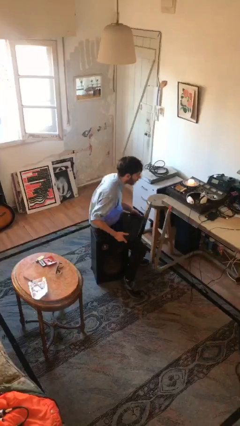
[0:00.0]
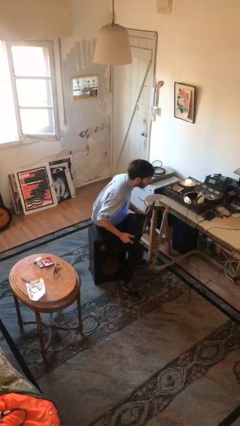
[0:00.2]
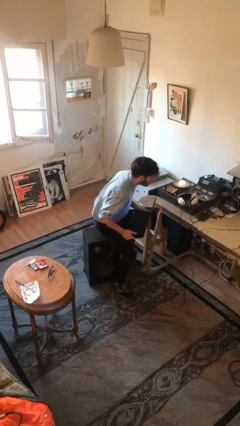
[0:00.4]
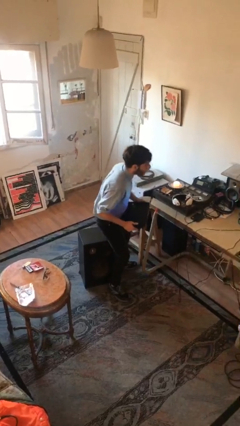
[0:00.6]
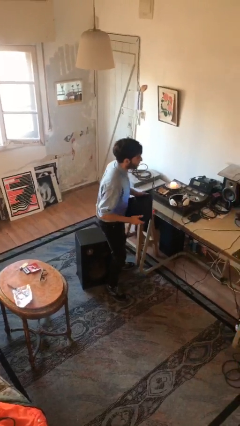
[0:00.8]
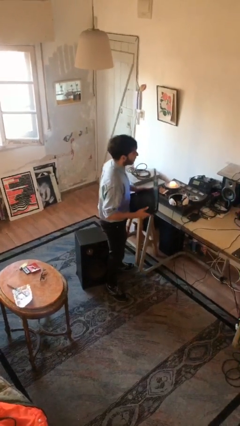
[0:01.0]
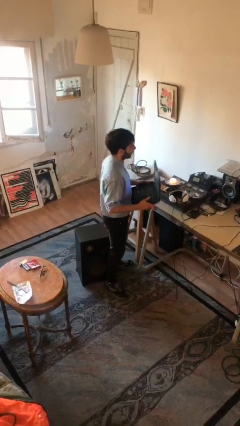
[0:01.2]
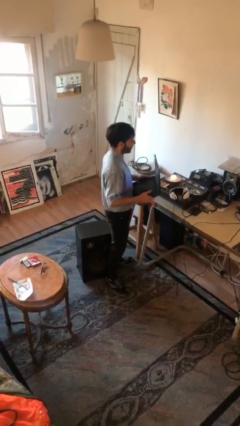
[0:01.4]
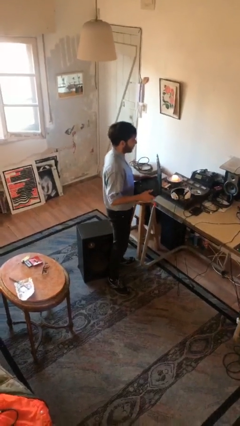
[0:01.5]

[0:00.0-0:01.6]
person stands up

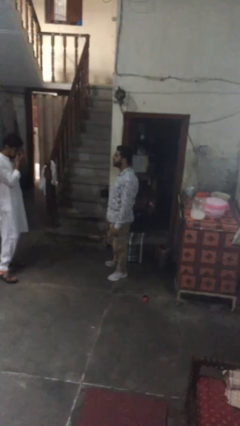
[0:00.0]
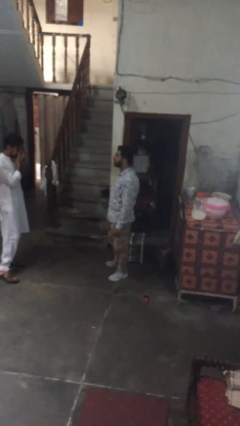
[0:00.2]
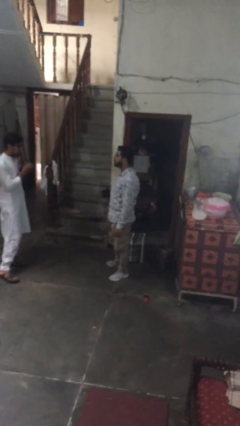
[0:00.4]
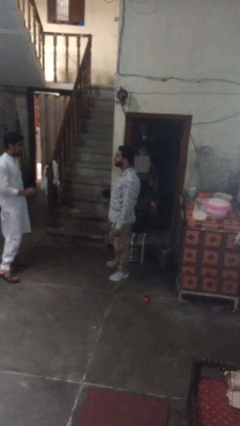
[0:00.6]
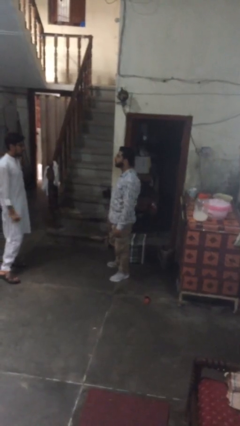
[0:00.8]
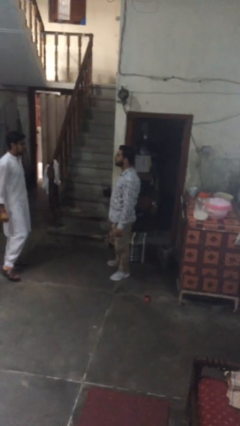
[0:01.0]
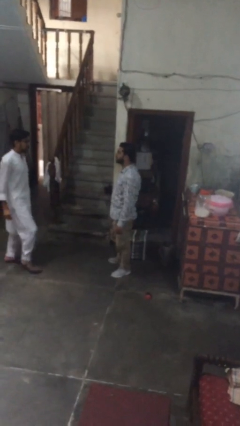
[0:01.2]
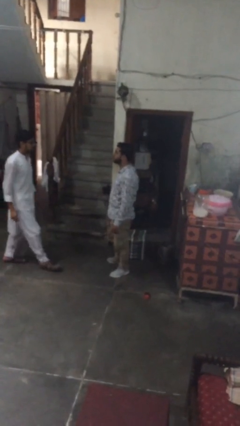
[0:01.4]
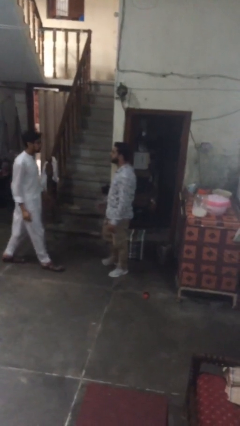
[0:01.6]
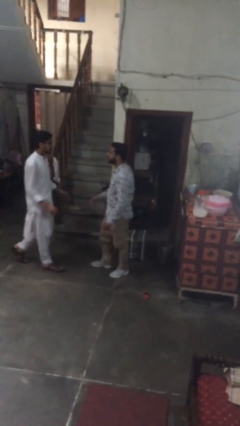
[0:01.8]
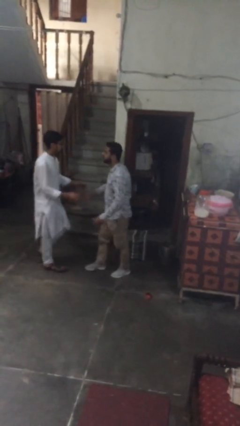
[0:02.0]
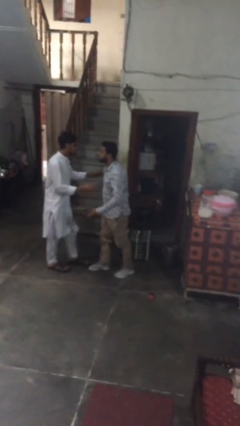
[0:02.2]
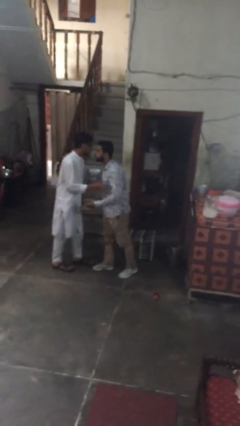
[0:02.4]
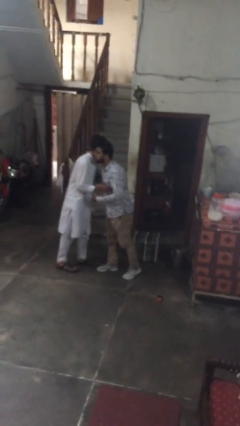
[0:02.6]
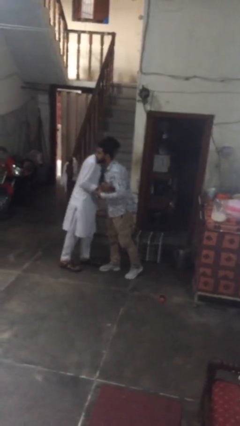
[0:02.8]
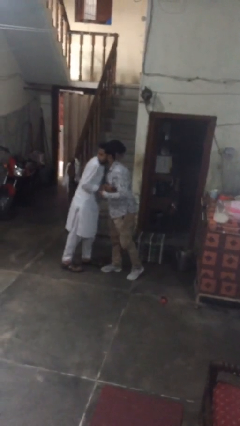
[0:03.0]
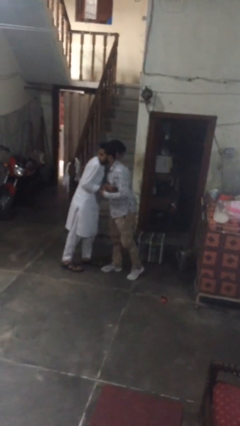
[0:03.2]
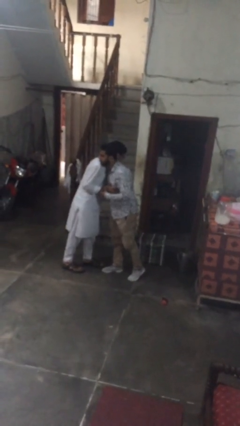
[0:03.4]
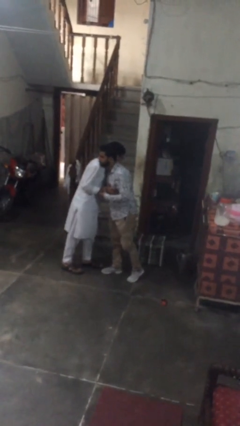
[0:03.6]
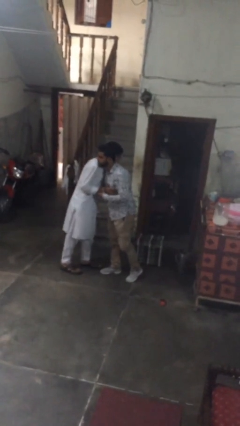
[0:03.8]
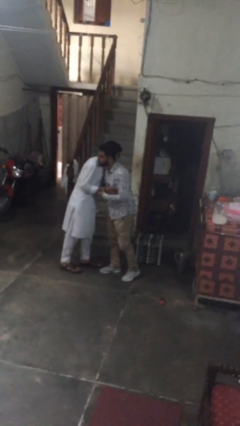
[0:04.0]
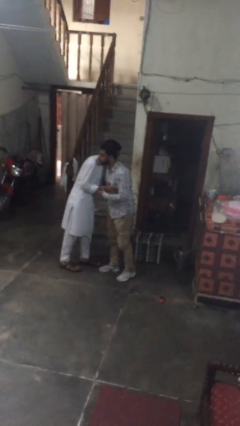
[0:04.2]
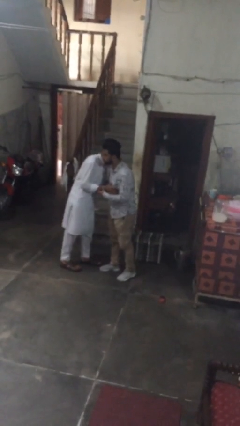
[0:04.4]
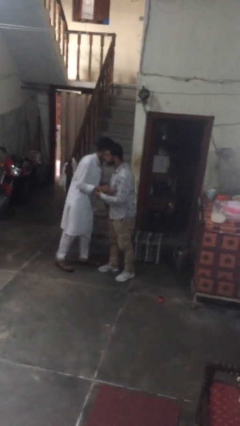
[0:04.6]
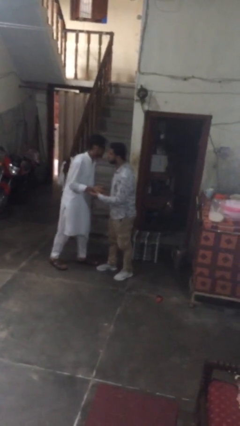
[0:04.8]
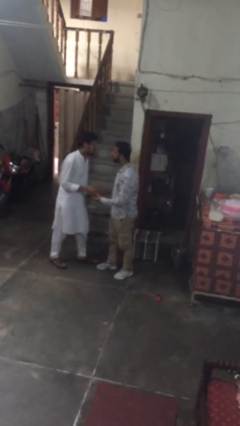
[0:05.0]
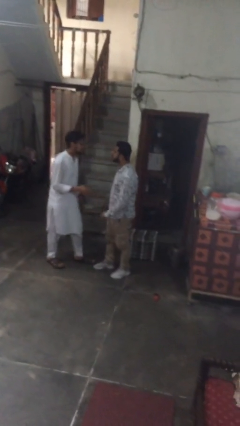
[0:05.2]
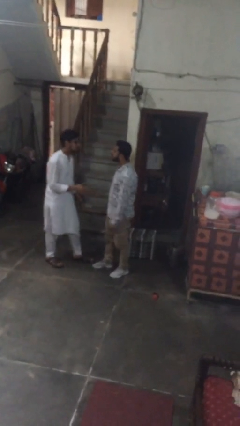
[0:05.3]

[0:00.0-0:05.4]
person embraces person

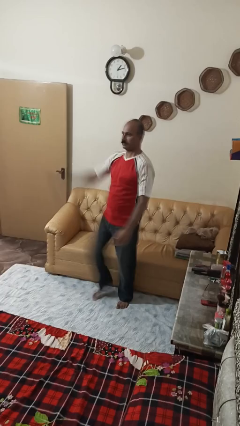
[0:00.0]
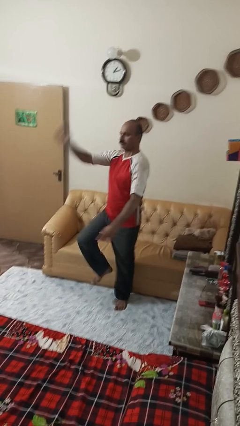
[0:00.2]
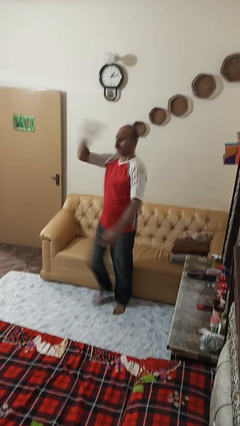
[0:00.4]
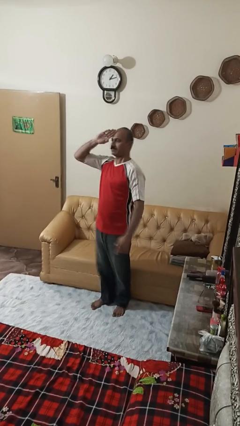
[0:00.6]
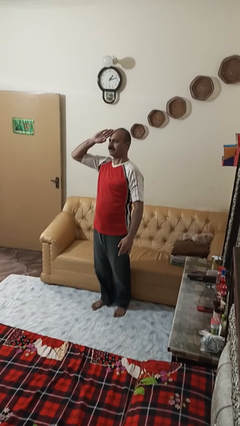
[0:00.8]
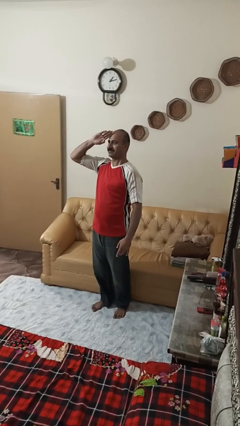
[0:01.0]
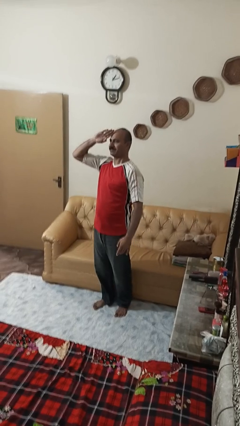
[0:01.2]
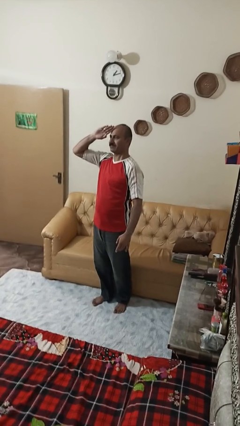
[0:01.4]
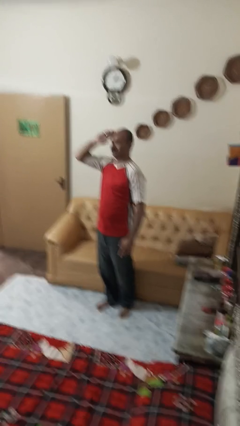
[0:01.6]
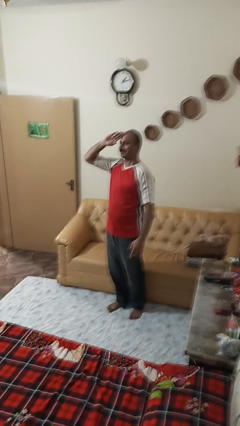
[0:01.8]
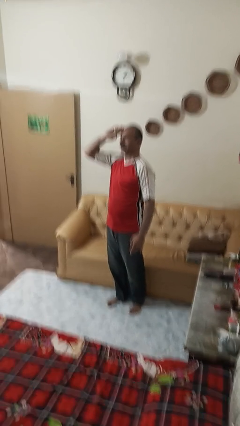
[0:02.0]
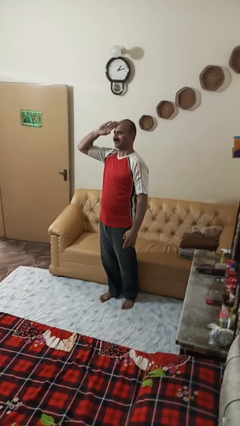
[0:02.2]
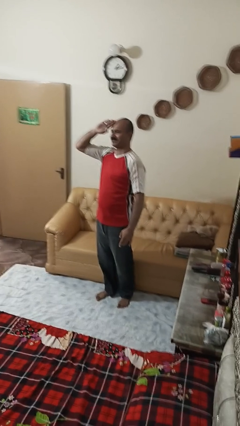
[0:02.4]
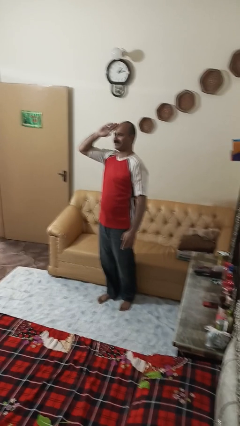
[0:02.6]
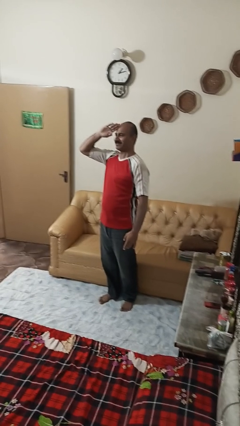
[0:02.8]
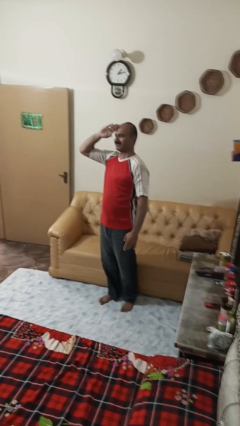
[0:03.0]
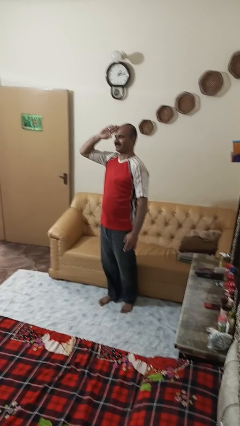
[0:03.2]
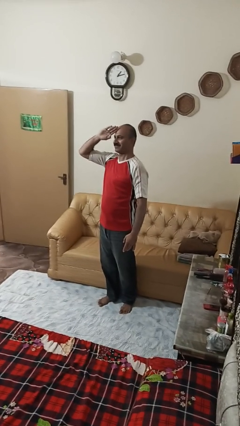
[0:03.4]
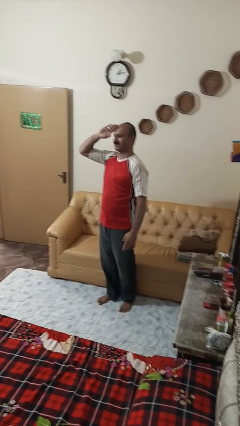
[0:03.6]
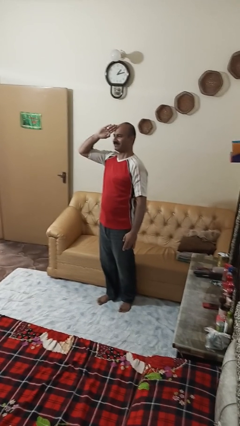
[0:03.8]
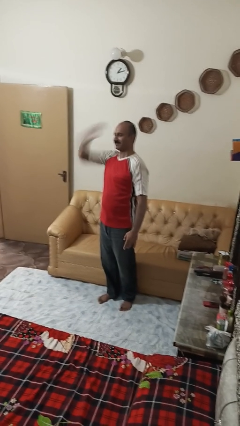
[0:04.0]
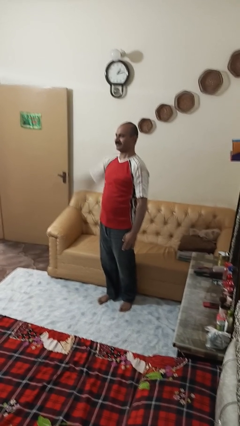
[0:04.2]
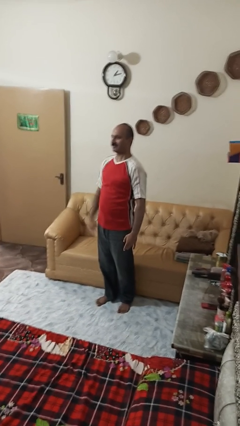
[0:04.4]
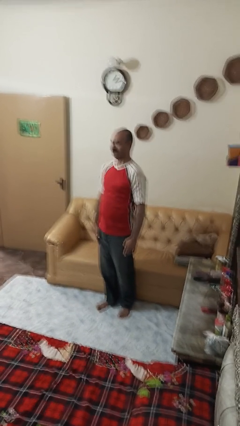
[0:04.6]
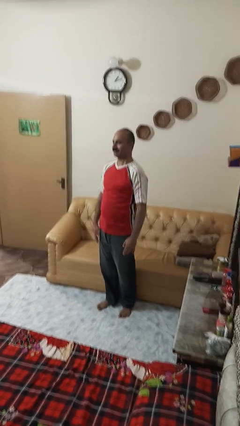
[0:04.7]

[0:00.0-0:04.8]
person salutes

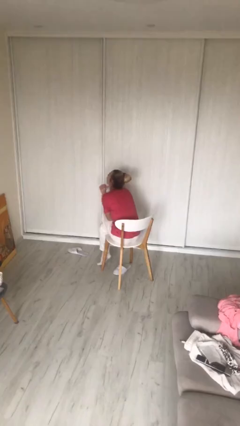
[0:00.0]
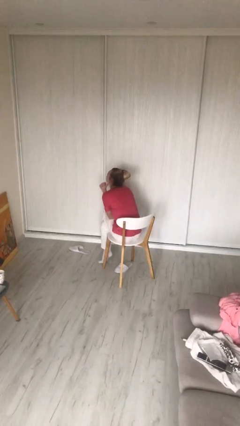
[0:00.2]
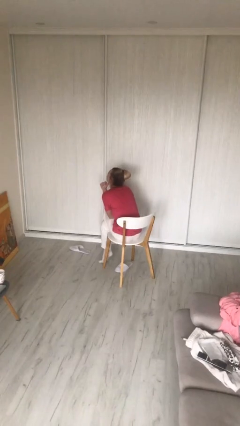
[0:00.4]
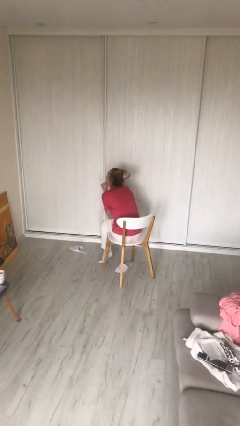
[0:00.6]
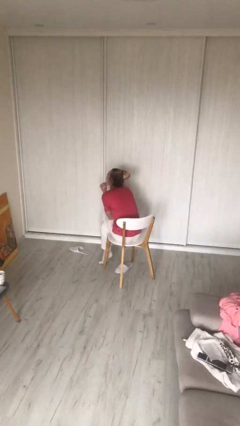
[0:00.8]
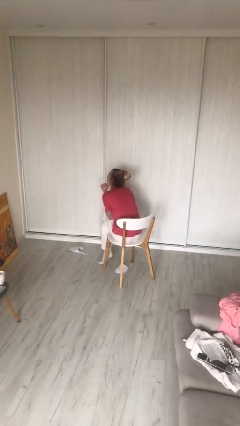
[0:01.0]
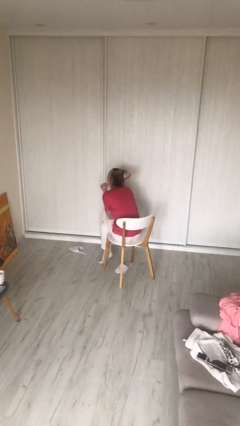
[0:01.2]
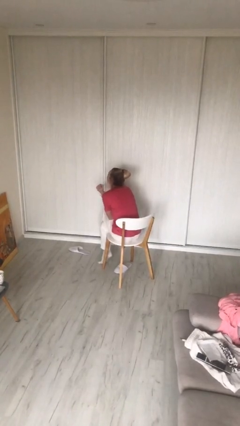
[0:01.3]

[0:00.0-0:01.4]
person strokes chin

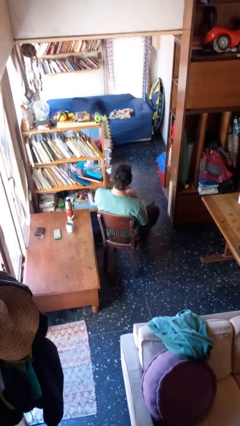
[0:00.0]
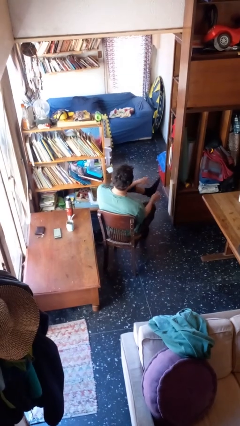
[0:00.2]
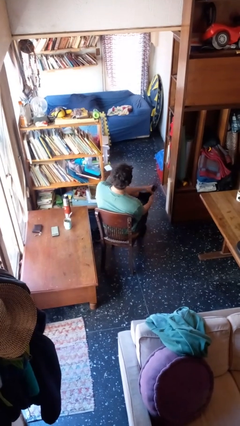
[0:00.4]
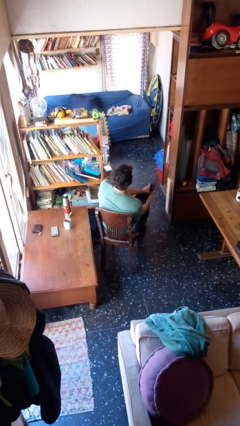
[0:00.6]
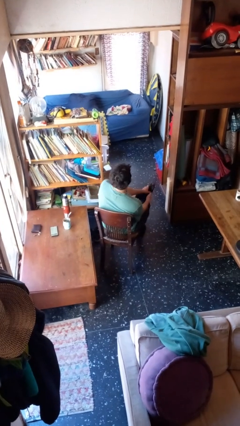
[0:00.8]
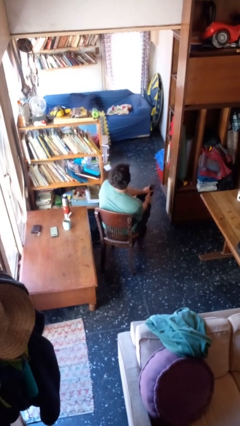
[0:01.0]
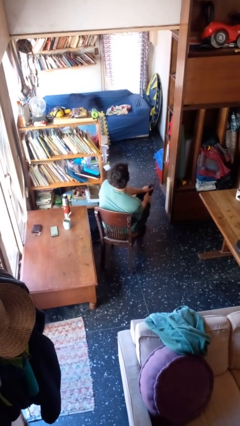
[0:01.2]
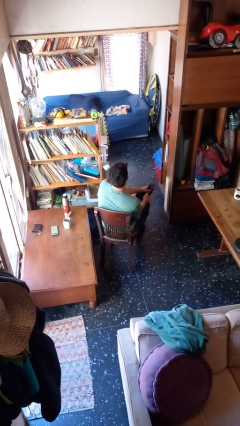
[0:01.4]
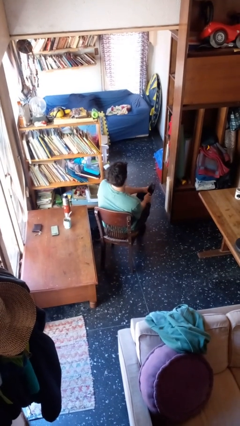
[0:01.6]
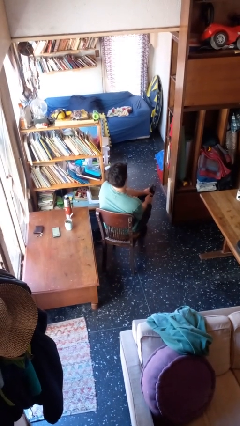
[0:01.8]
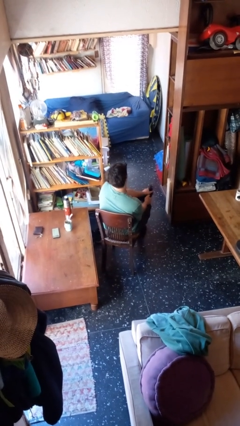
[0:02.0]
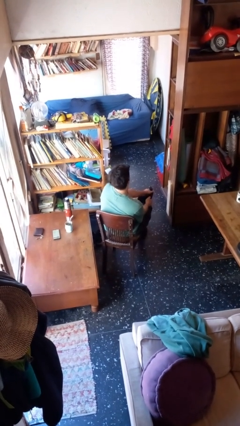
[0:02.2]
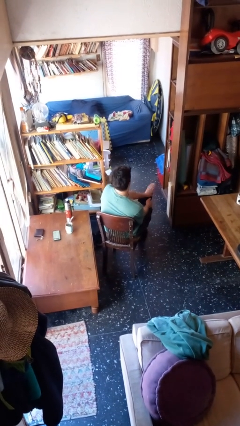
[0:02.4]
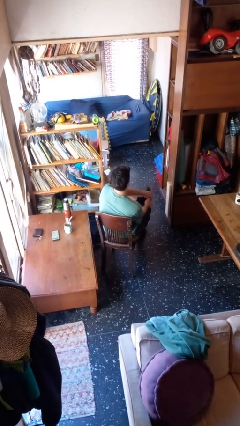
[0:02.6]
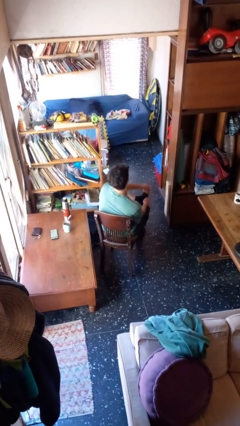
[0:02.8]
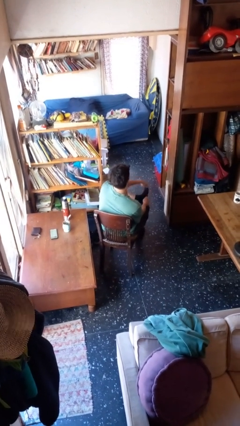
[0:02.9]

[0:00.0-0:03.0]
person rubs foot

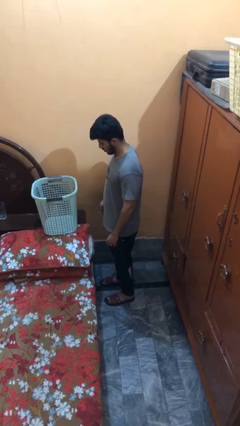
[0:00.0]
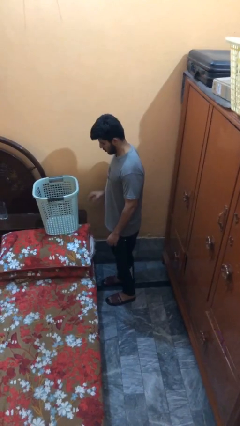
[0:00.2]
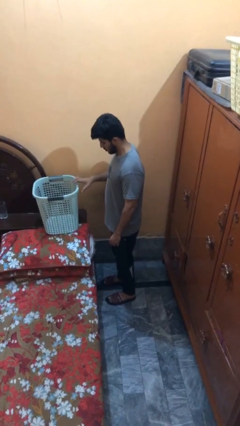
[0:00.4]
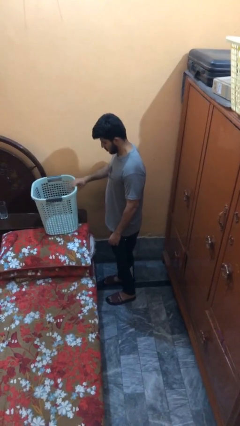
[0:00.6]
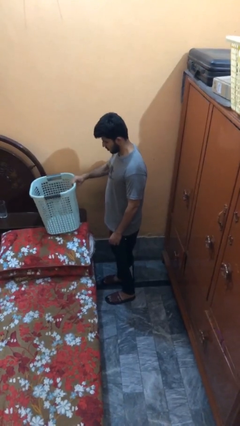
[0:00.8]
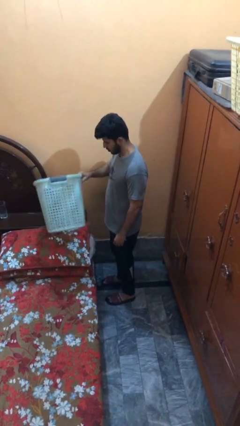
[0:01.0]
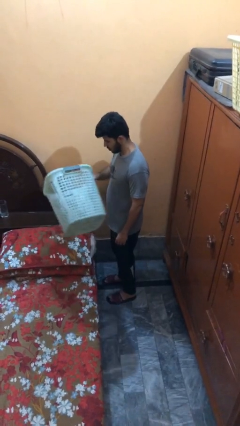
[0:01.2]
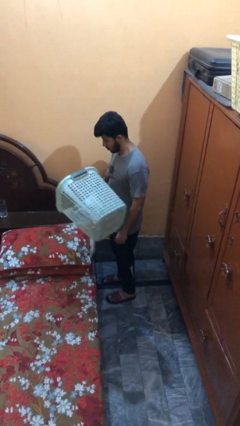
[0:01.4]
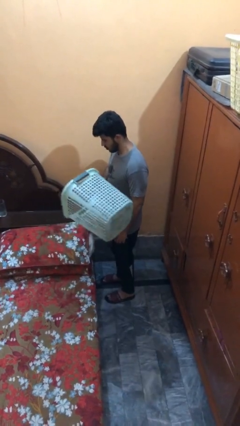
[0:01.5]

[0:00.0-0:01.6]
person picks up object from bed
